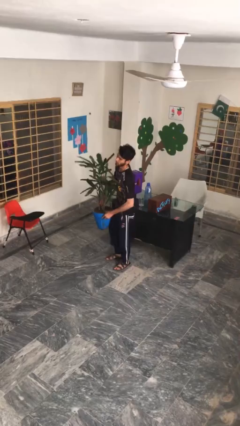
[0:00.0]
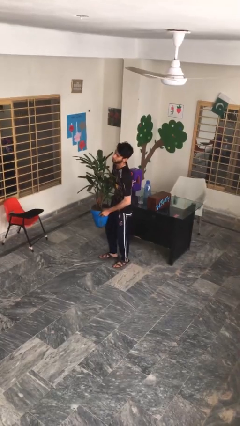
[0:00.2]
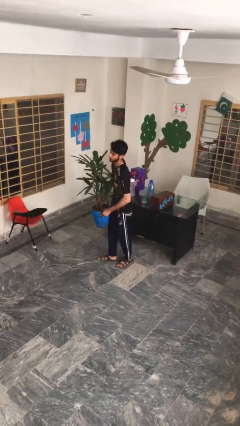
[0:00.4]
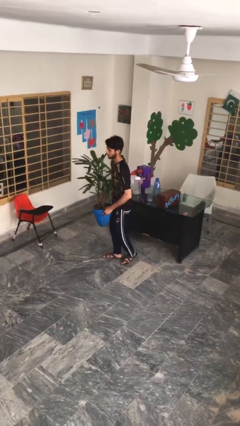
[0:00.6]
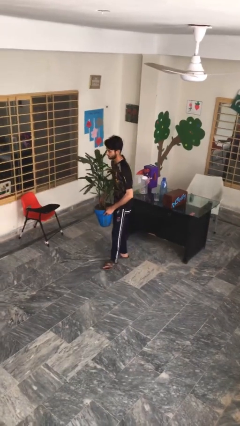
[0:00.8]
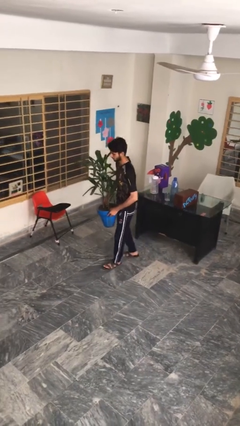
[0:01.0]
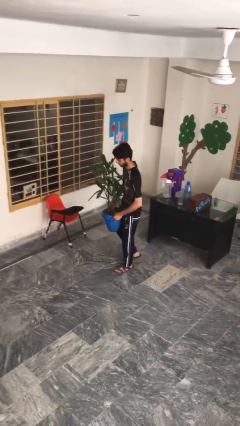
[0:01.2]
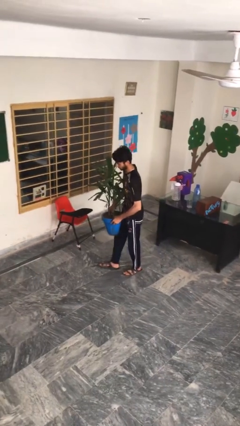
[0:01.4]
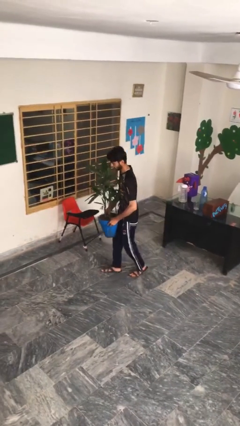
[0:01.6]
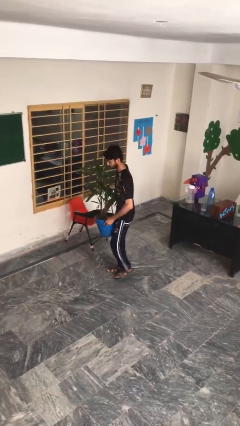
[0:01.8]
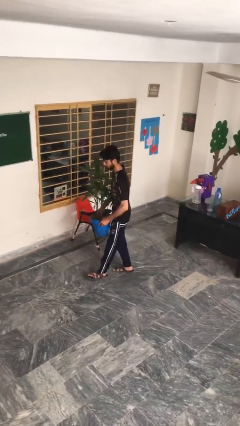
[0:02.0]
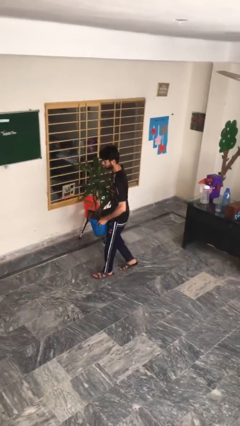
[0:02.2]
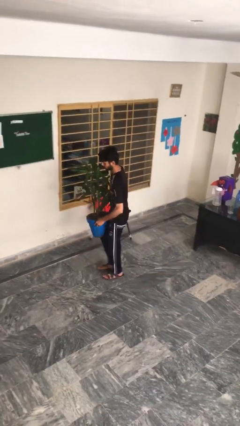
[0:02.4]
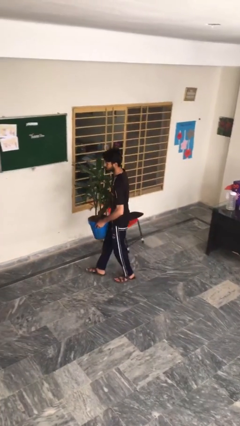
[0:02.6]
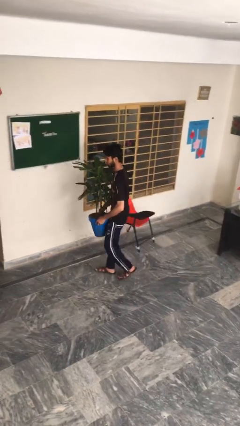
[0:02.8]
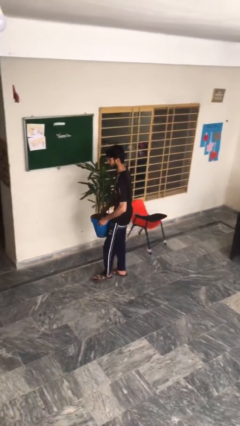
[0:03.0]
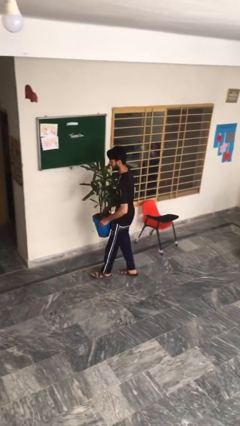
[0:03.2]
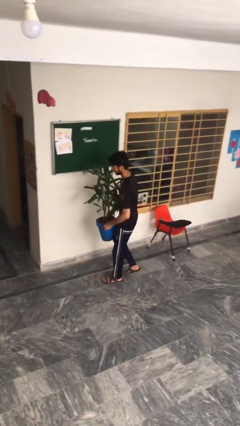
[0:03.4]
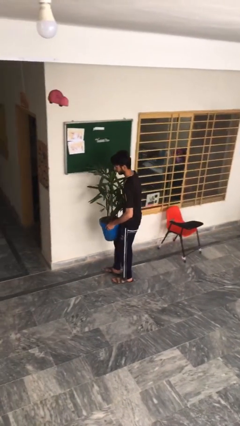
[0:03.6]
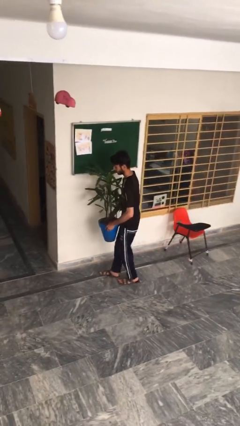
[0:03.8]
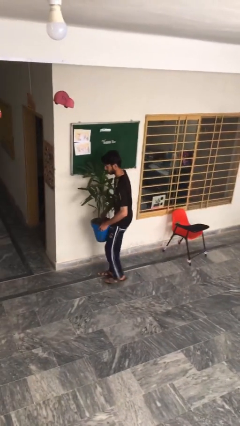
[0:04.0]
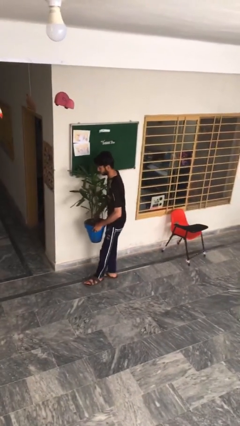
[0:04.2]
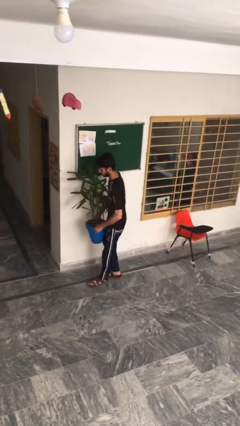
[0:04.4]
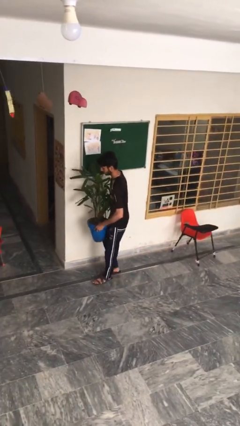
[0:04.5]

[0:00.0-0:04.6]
person carries heavy object

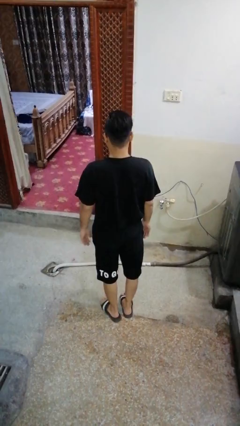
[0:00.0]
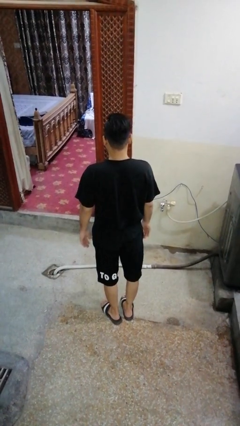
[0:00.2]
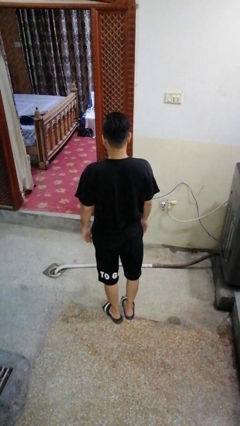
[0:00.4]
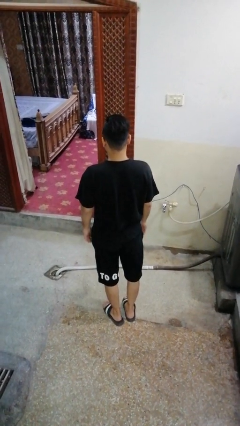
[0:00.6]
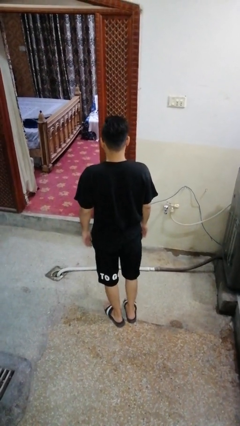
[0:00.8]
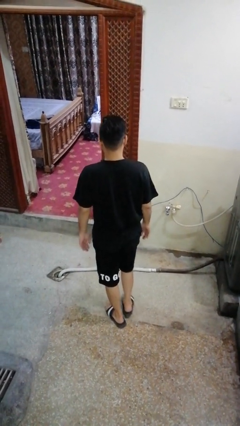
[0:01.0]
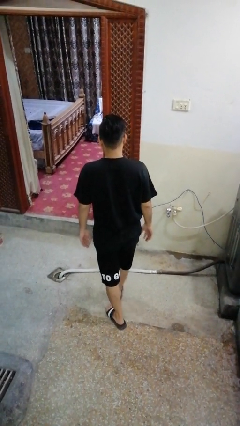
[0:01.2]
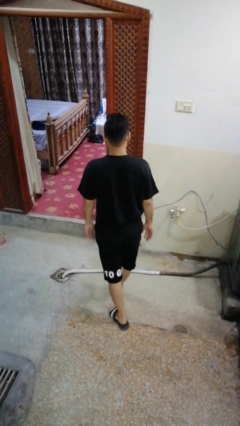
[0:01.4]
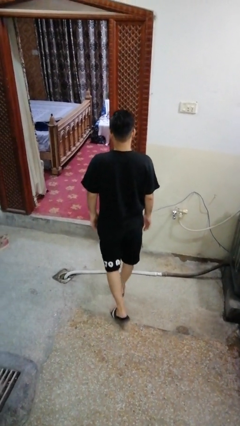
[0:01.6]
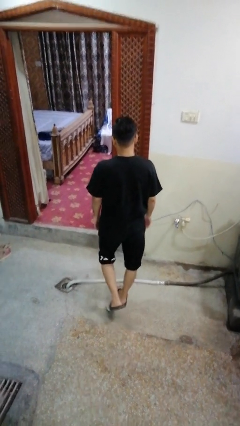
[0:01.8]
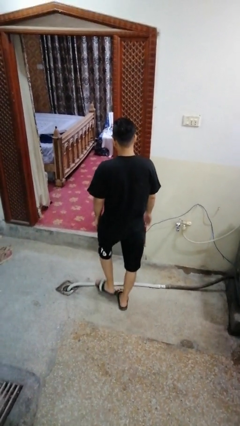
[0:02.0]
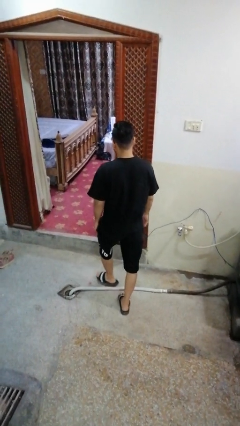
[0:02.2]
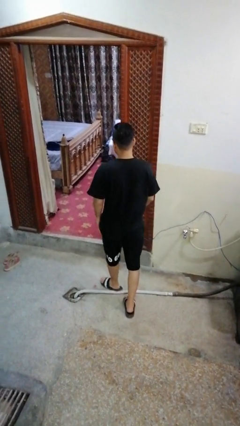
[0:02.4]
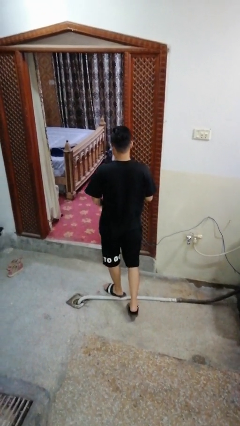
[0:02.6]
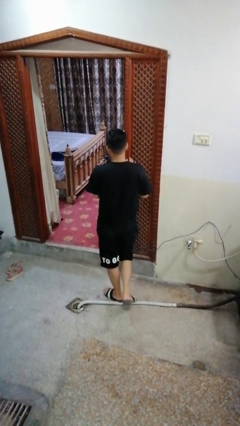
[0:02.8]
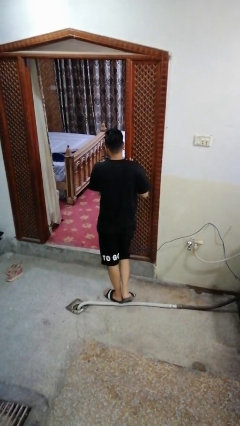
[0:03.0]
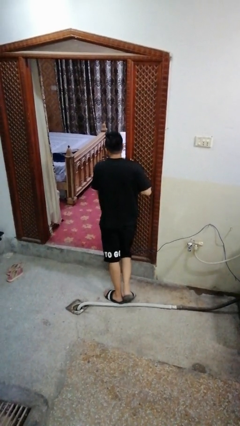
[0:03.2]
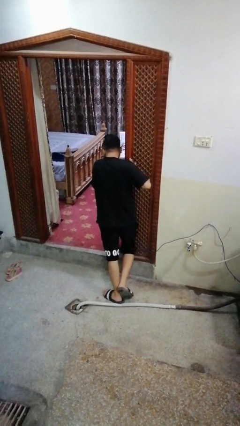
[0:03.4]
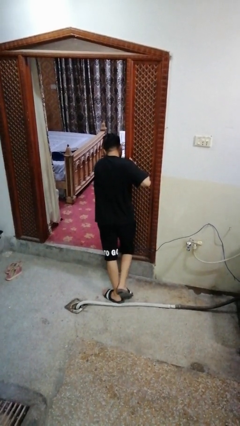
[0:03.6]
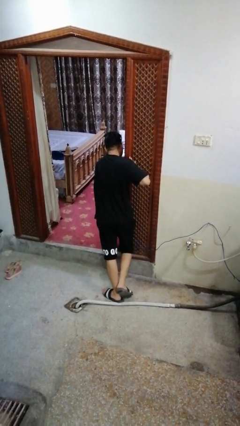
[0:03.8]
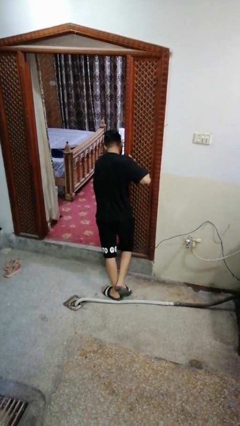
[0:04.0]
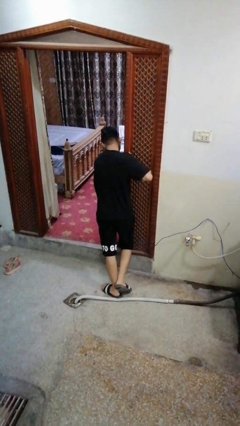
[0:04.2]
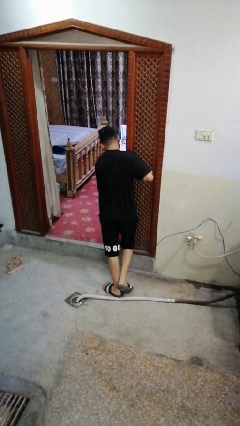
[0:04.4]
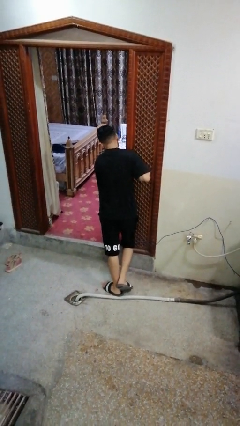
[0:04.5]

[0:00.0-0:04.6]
person bumps into wall

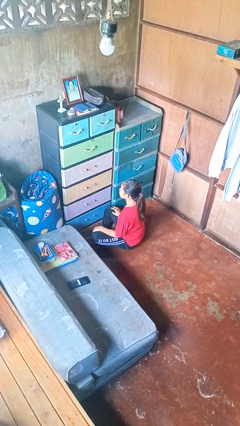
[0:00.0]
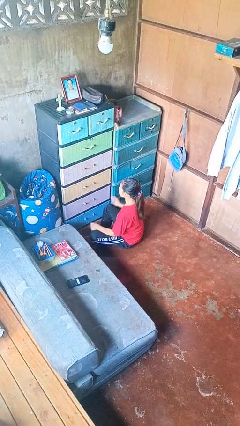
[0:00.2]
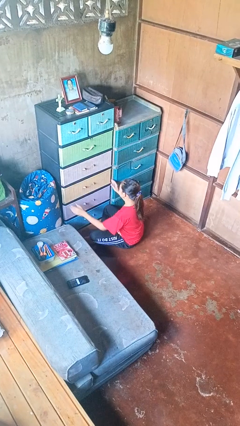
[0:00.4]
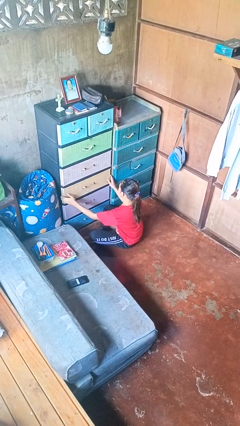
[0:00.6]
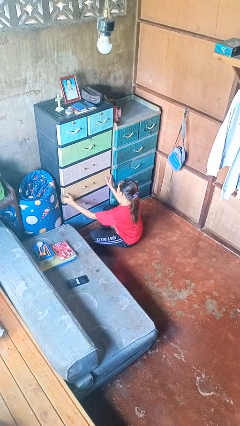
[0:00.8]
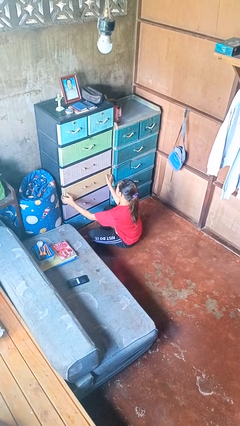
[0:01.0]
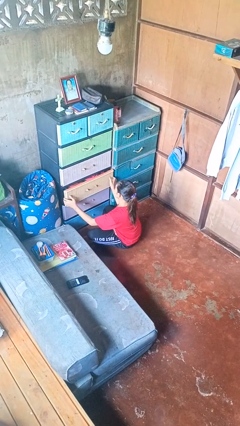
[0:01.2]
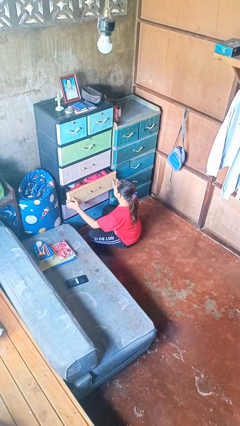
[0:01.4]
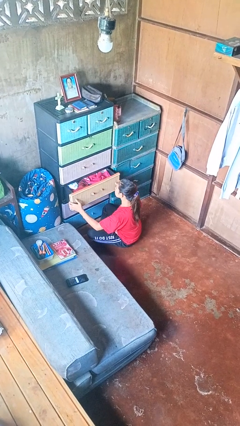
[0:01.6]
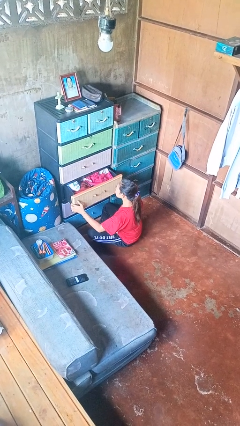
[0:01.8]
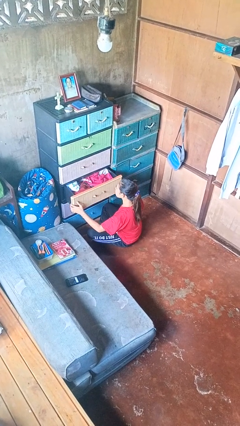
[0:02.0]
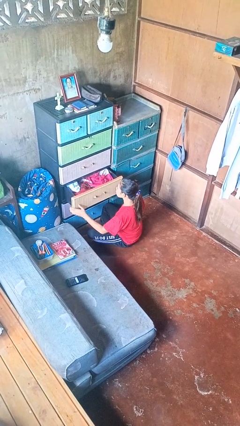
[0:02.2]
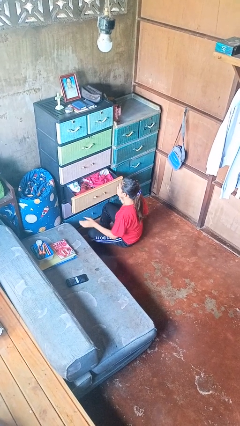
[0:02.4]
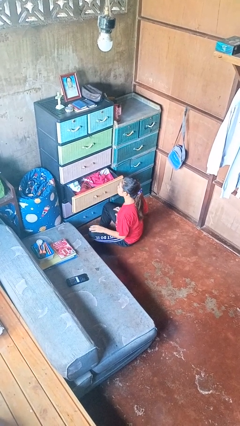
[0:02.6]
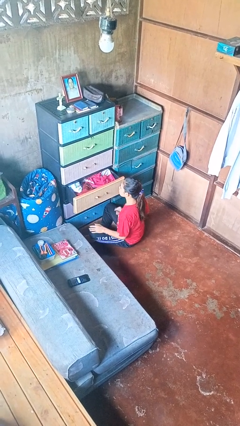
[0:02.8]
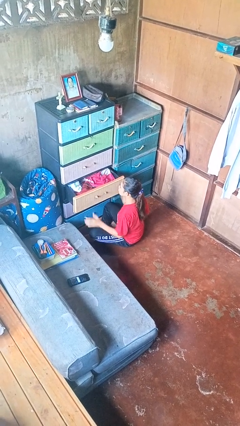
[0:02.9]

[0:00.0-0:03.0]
person opens dresser drawer

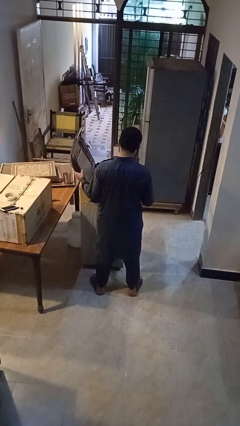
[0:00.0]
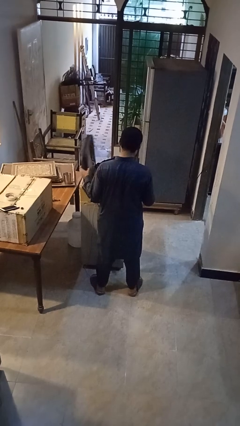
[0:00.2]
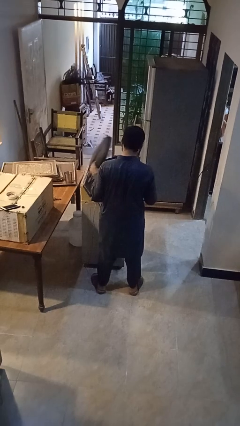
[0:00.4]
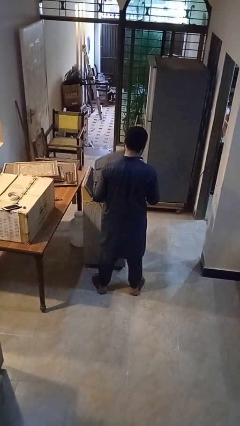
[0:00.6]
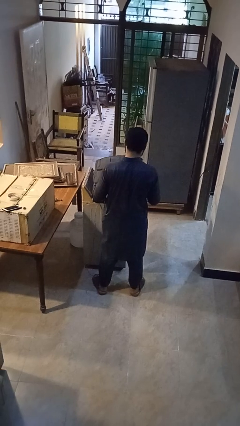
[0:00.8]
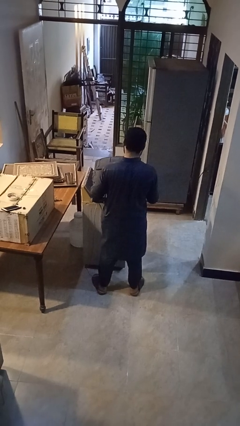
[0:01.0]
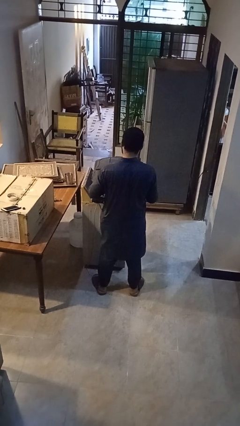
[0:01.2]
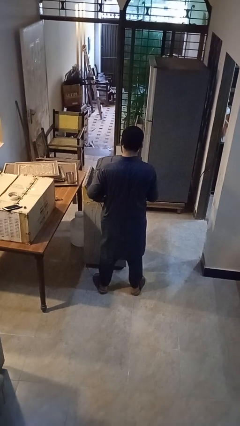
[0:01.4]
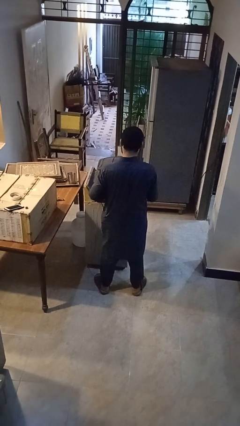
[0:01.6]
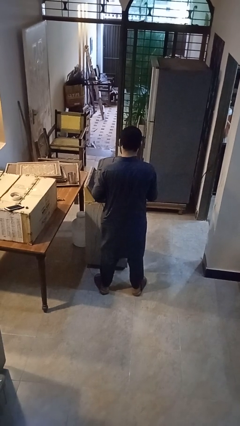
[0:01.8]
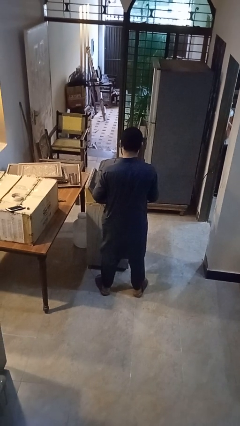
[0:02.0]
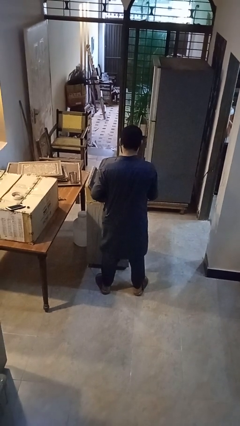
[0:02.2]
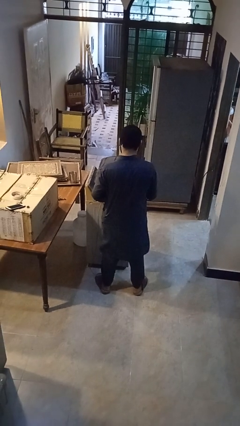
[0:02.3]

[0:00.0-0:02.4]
person opens suitcase

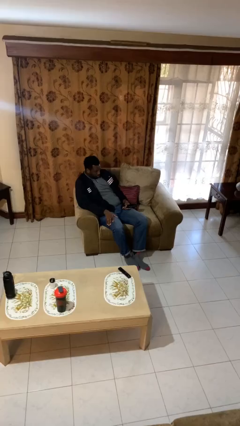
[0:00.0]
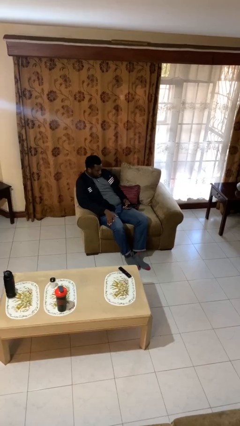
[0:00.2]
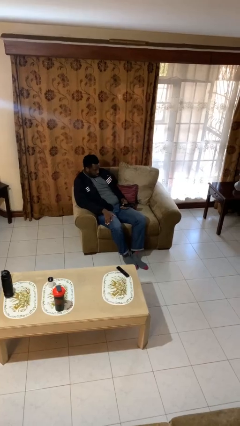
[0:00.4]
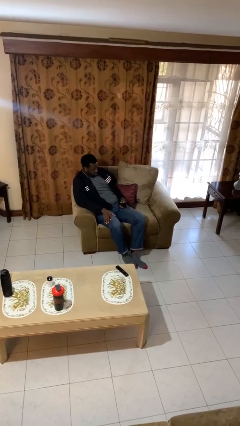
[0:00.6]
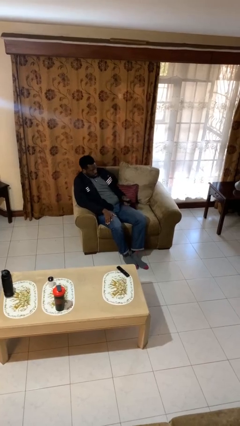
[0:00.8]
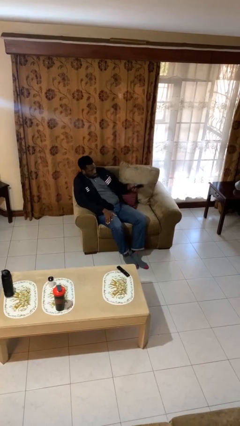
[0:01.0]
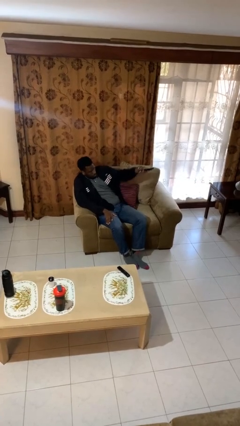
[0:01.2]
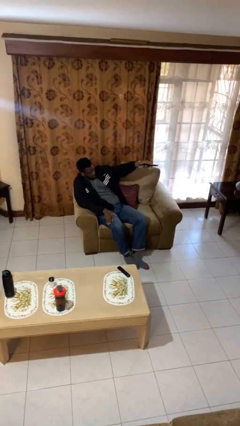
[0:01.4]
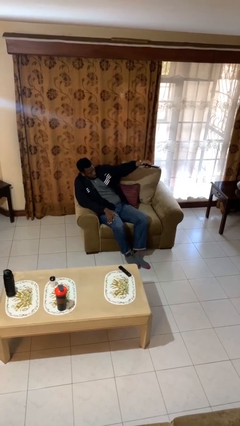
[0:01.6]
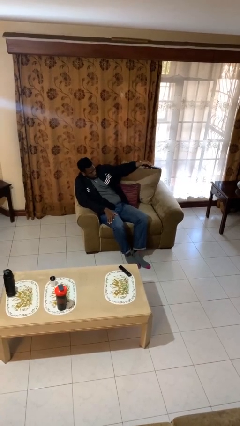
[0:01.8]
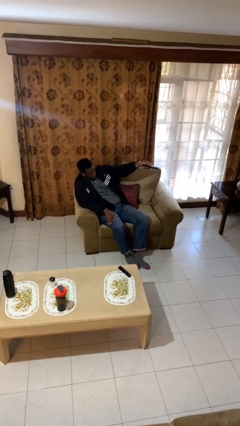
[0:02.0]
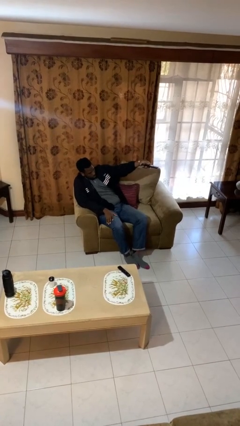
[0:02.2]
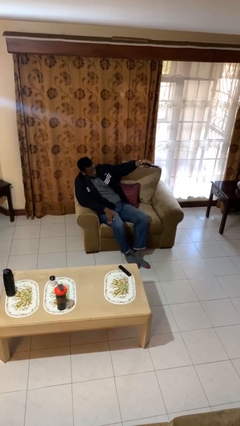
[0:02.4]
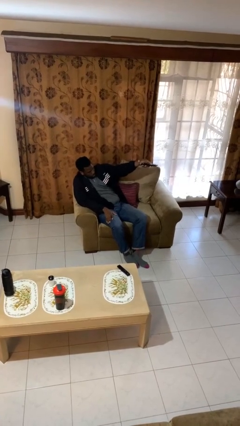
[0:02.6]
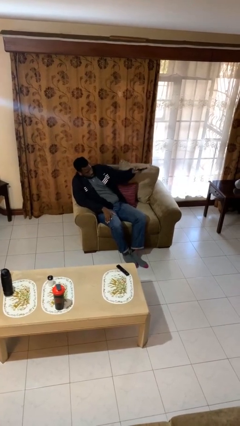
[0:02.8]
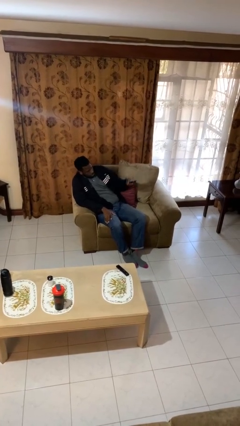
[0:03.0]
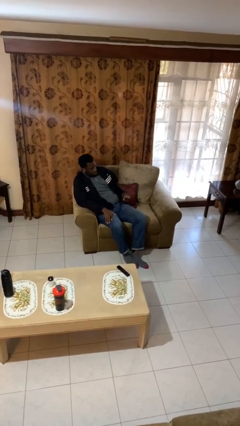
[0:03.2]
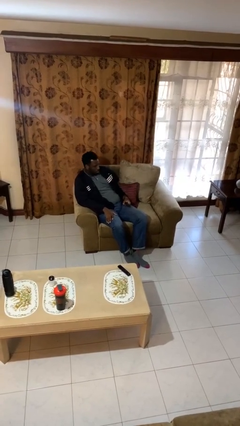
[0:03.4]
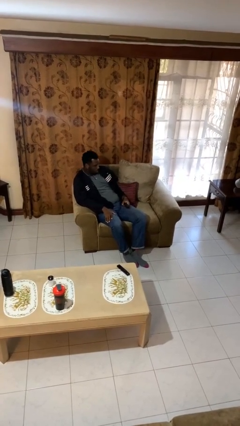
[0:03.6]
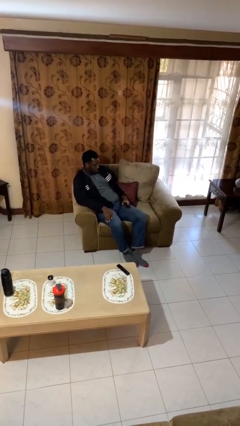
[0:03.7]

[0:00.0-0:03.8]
person uses television remote
